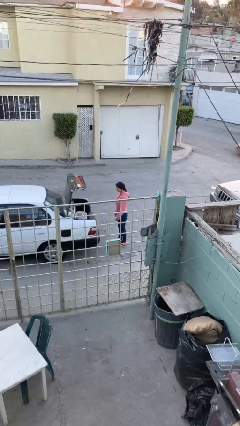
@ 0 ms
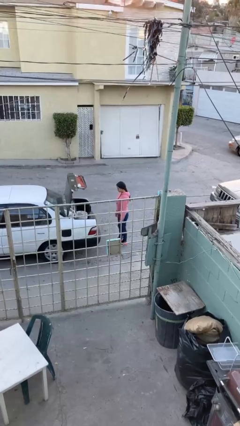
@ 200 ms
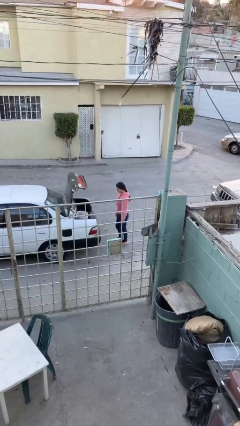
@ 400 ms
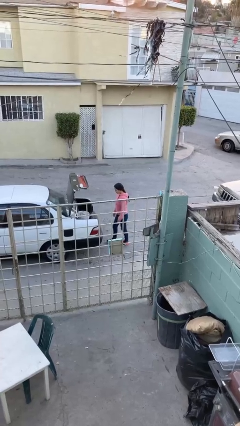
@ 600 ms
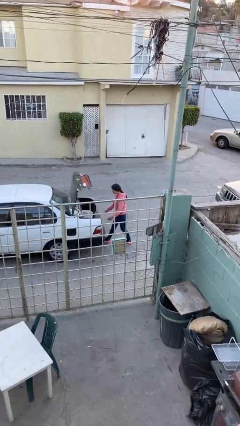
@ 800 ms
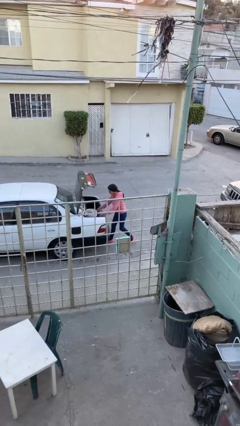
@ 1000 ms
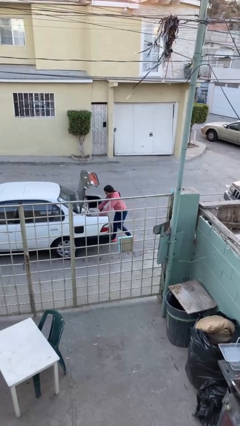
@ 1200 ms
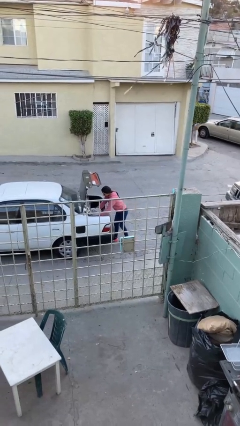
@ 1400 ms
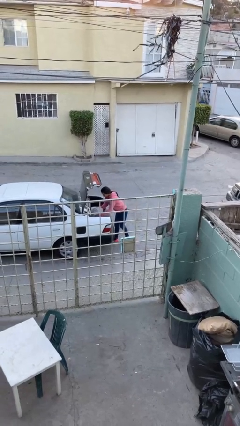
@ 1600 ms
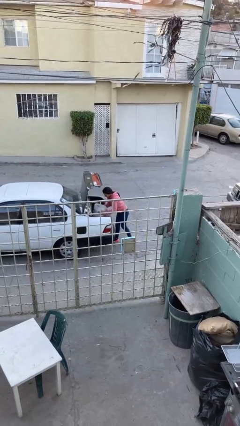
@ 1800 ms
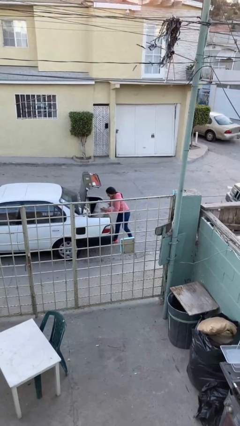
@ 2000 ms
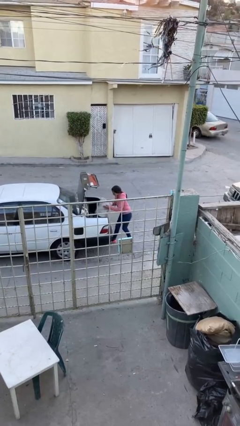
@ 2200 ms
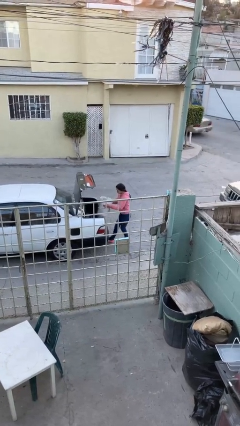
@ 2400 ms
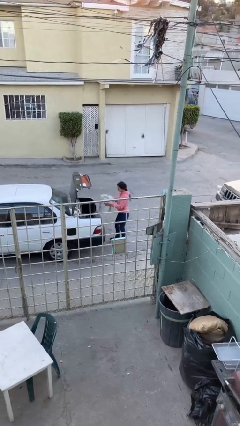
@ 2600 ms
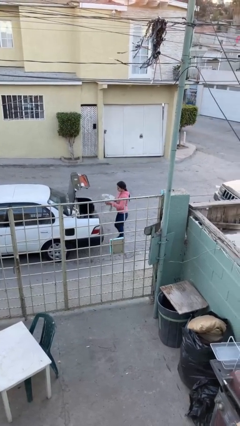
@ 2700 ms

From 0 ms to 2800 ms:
person unloads car

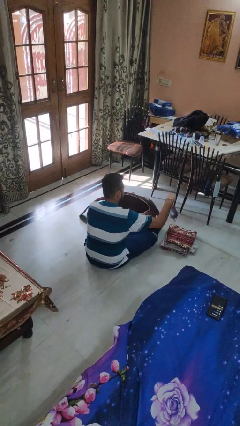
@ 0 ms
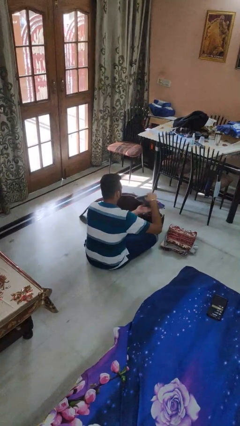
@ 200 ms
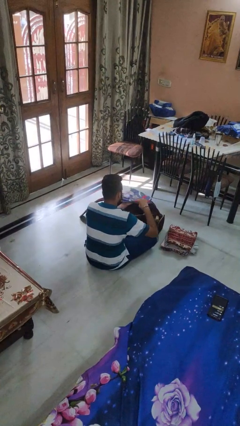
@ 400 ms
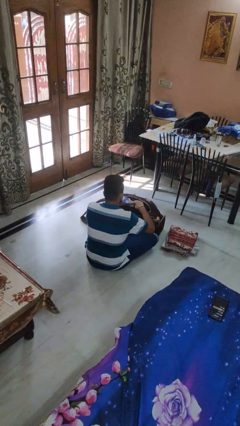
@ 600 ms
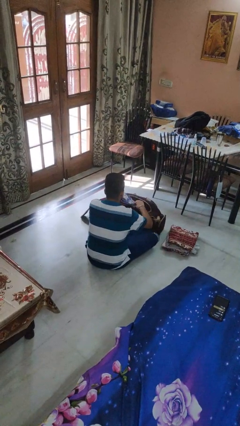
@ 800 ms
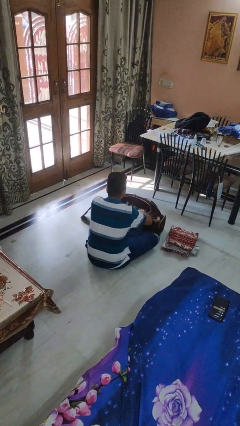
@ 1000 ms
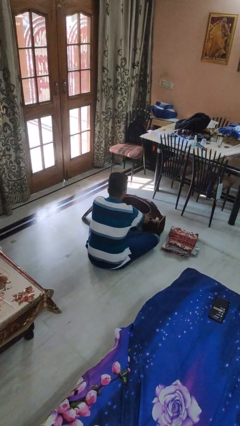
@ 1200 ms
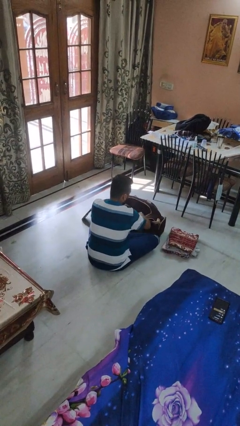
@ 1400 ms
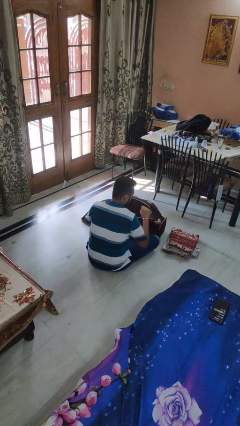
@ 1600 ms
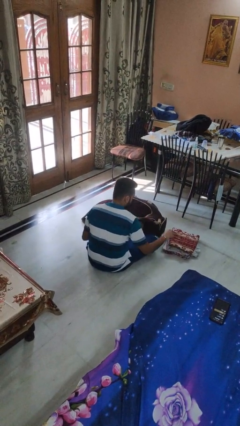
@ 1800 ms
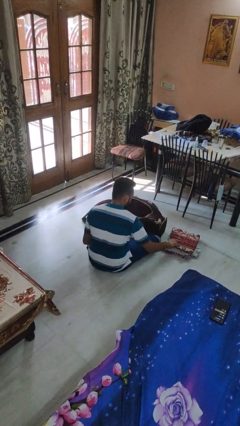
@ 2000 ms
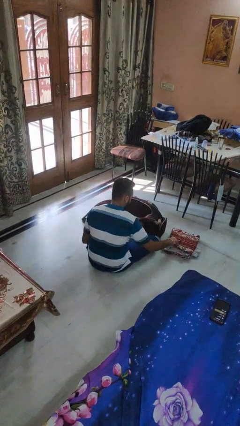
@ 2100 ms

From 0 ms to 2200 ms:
person loads clothes into suitcase

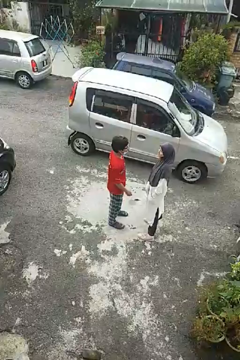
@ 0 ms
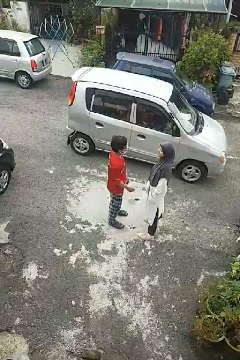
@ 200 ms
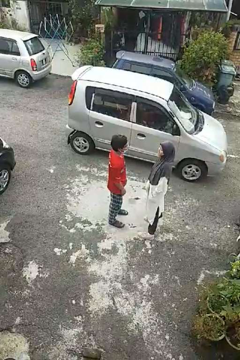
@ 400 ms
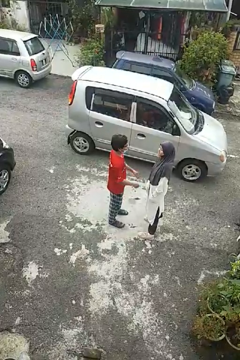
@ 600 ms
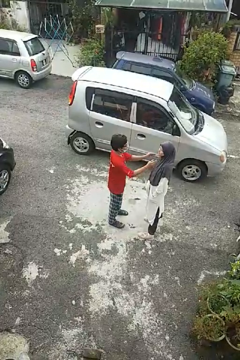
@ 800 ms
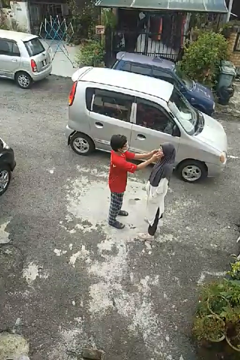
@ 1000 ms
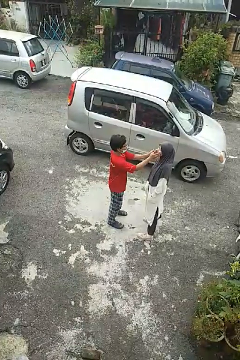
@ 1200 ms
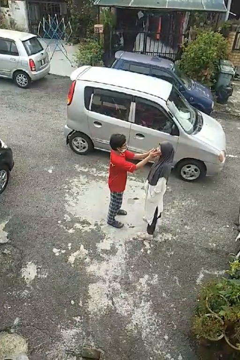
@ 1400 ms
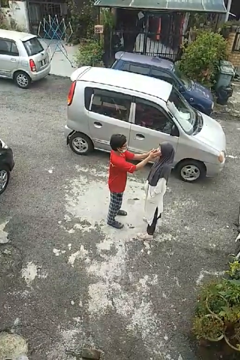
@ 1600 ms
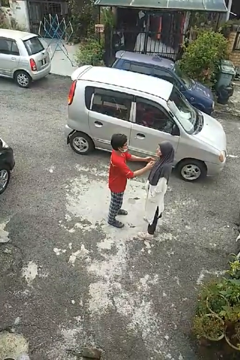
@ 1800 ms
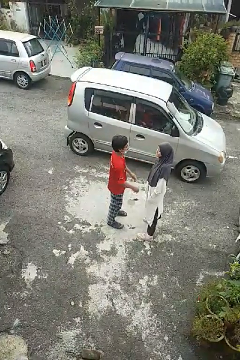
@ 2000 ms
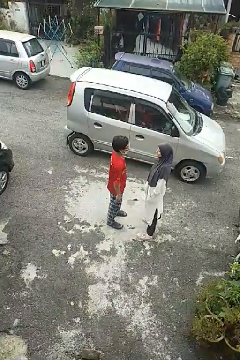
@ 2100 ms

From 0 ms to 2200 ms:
person touches face of person

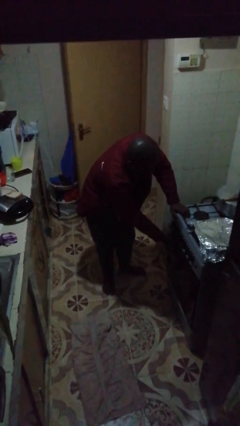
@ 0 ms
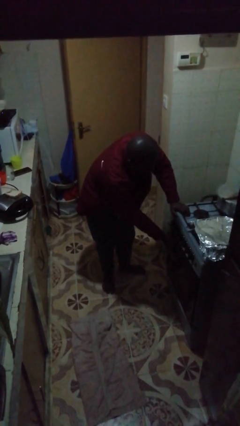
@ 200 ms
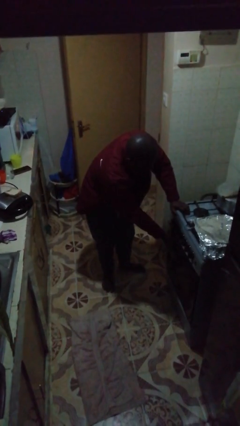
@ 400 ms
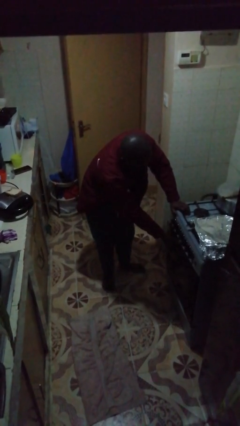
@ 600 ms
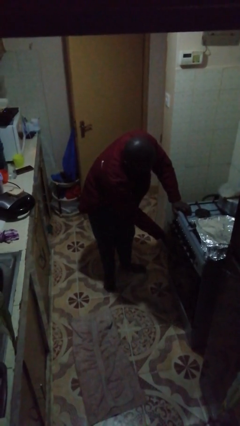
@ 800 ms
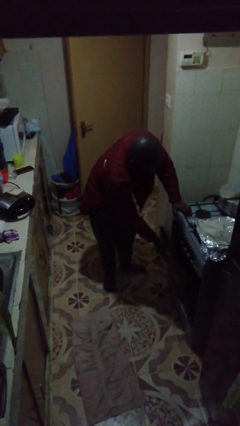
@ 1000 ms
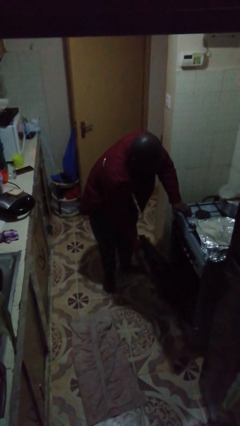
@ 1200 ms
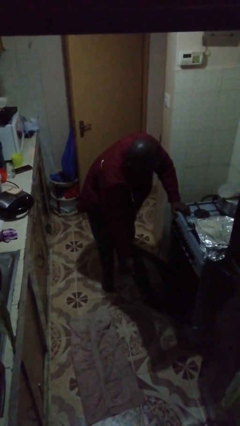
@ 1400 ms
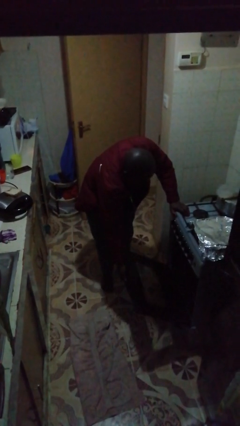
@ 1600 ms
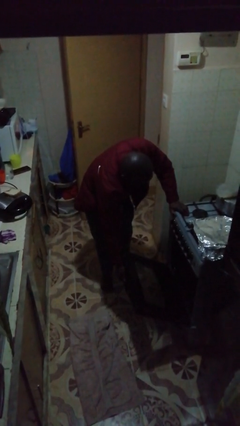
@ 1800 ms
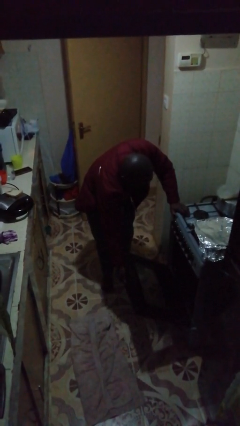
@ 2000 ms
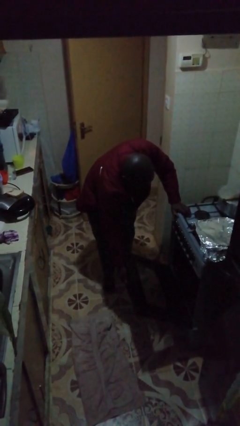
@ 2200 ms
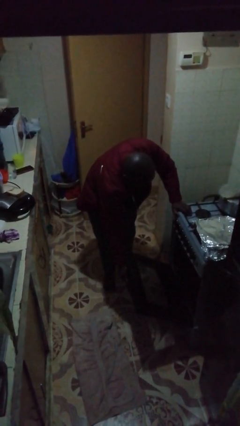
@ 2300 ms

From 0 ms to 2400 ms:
person opens oven door

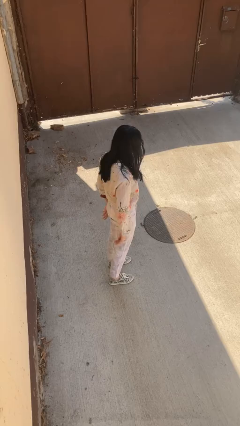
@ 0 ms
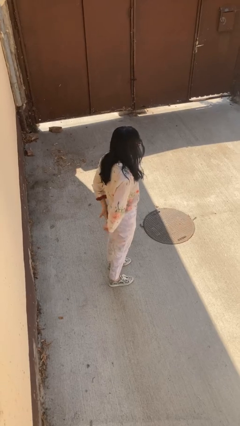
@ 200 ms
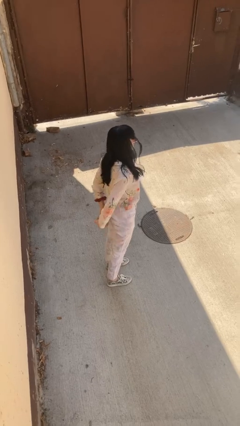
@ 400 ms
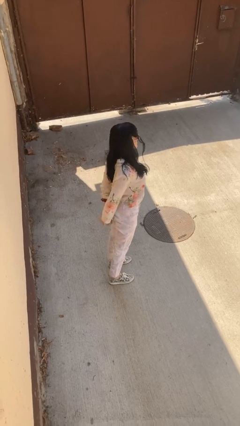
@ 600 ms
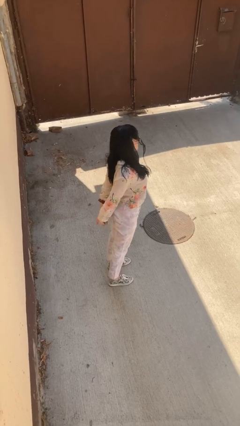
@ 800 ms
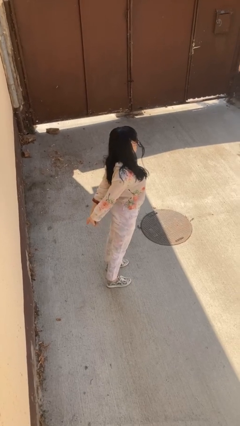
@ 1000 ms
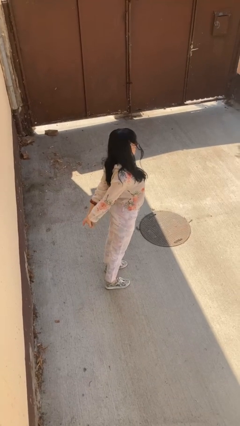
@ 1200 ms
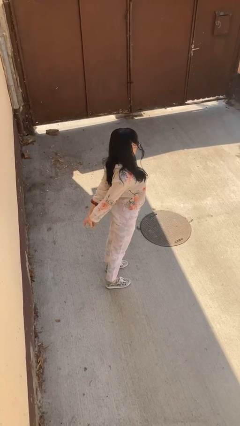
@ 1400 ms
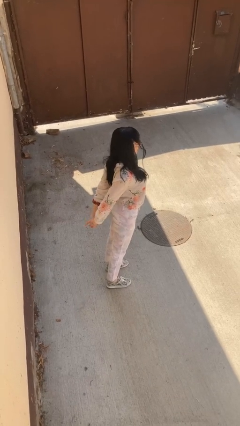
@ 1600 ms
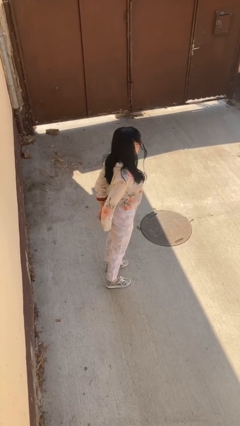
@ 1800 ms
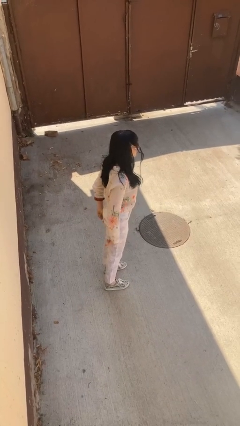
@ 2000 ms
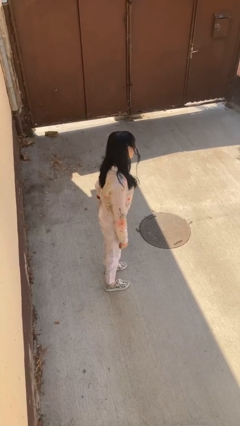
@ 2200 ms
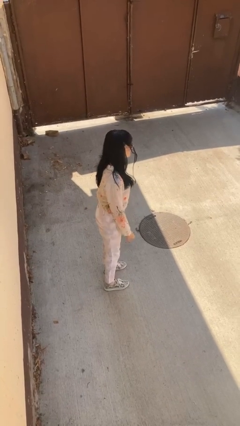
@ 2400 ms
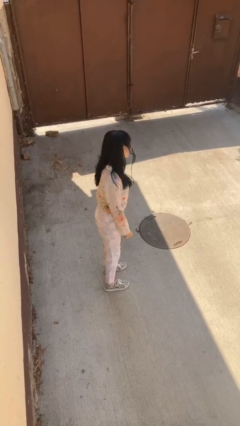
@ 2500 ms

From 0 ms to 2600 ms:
person stretches back

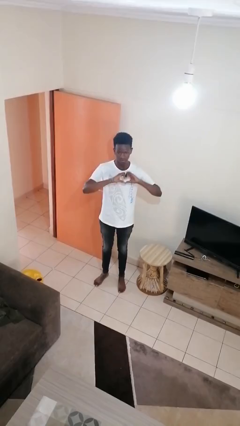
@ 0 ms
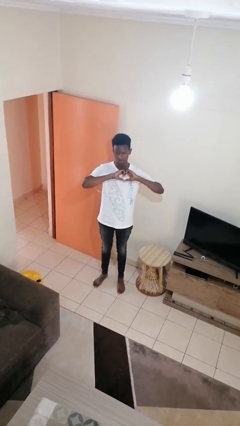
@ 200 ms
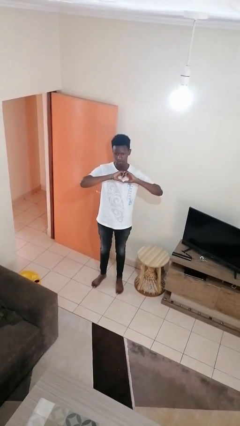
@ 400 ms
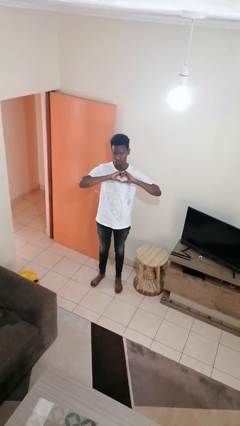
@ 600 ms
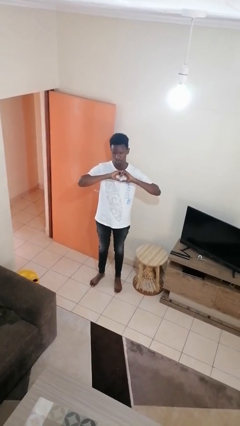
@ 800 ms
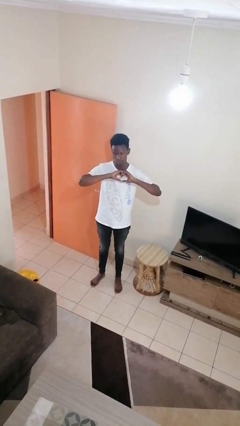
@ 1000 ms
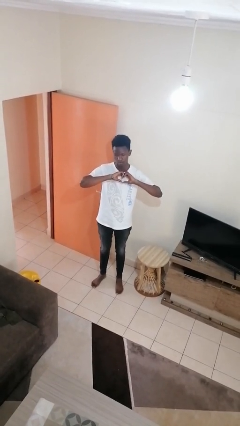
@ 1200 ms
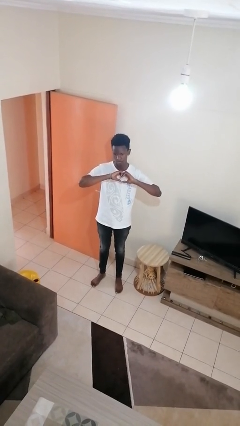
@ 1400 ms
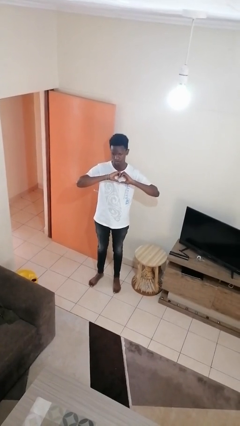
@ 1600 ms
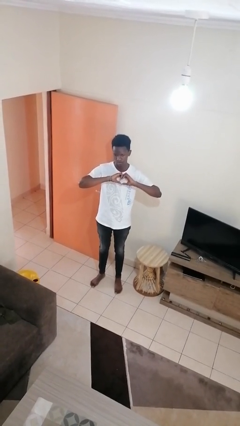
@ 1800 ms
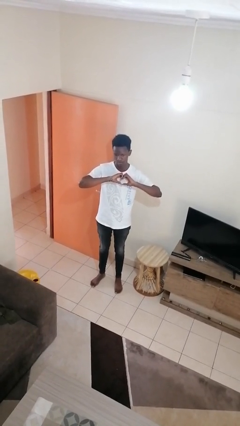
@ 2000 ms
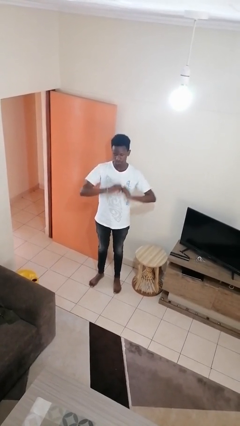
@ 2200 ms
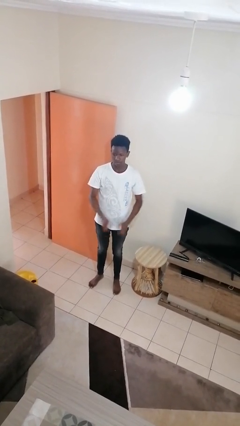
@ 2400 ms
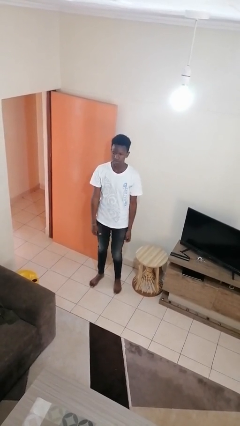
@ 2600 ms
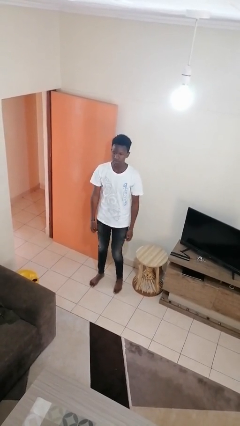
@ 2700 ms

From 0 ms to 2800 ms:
person gestures heart

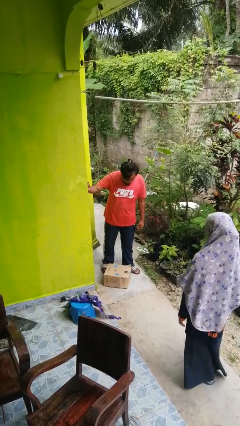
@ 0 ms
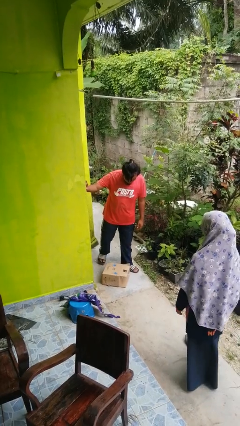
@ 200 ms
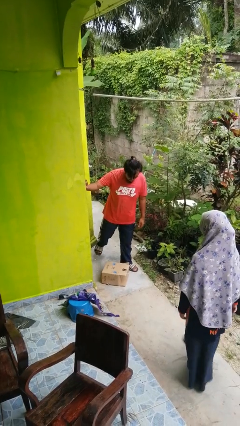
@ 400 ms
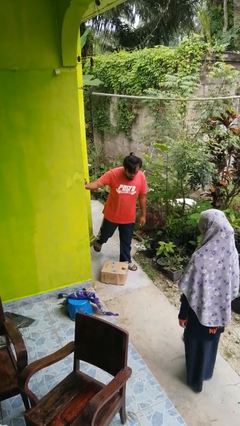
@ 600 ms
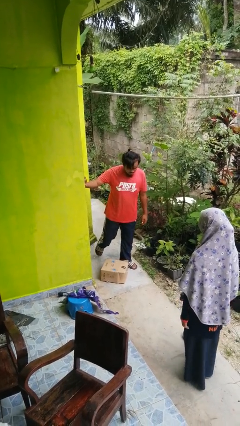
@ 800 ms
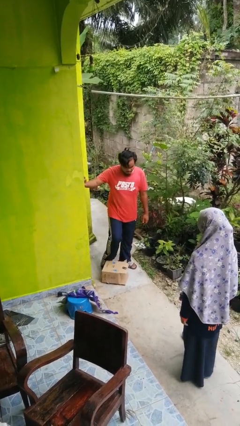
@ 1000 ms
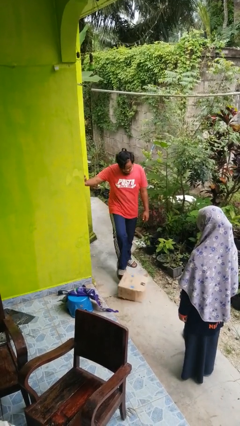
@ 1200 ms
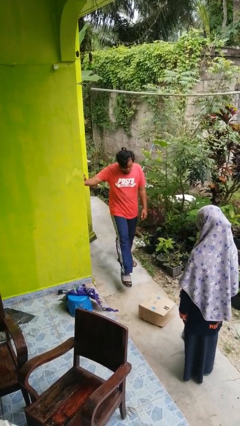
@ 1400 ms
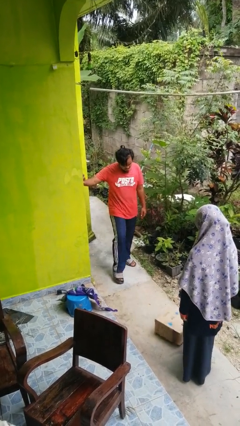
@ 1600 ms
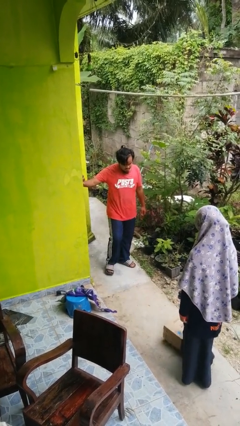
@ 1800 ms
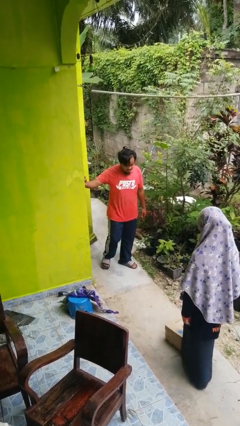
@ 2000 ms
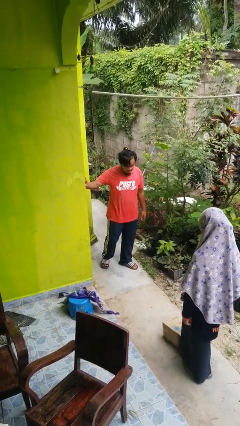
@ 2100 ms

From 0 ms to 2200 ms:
person kicks object to person
